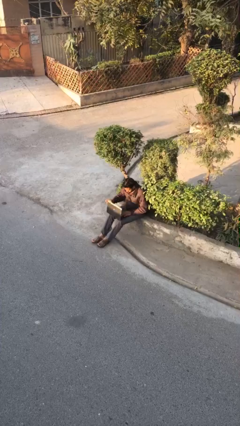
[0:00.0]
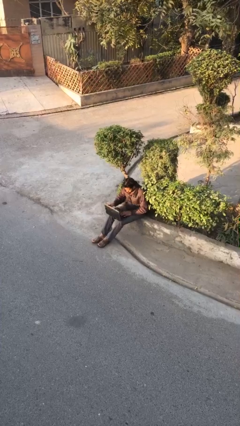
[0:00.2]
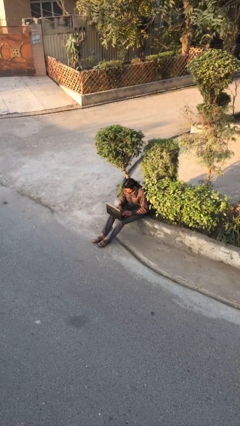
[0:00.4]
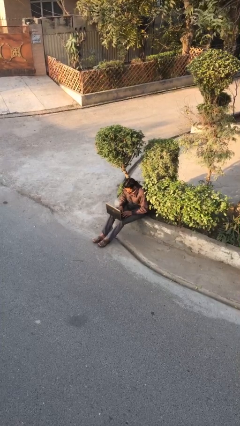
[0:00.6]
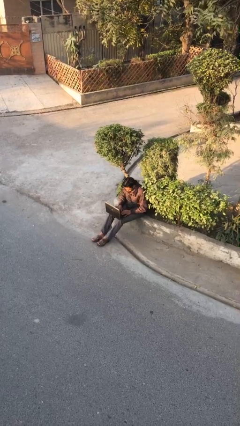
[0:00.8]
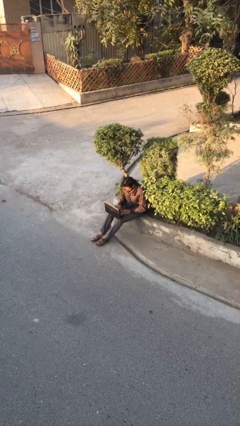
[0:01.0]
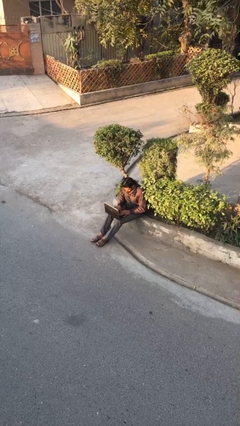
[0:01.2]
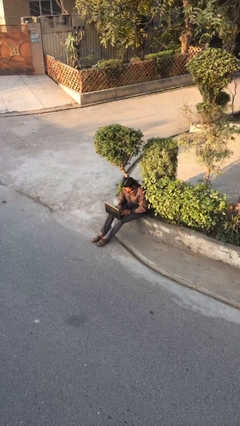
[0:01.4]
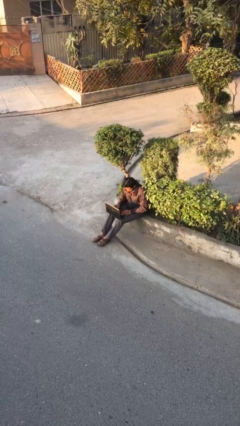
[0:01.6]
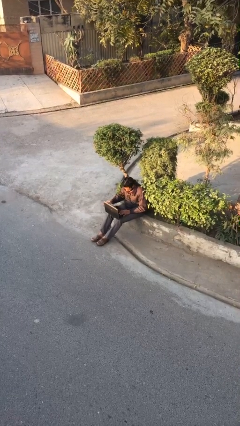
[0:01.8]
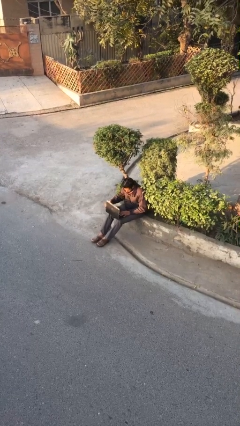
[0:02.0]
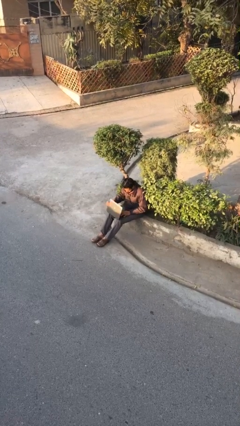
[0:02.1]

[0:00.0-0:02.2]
person interacts with laptop

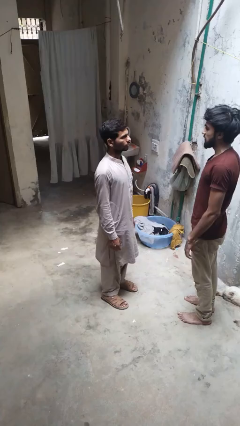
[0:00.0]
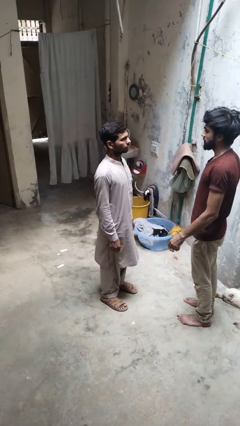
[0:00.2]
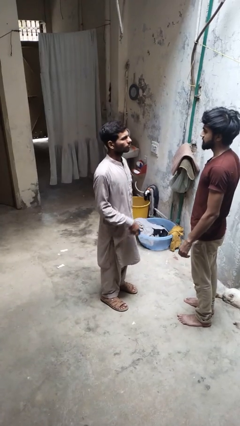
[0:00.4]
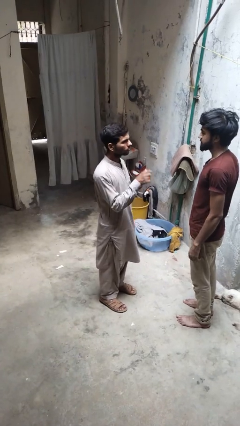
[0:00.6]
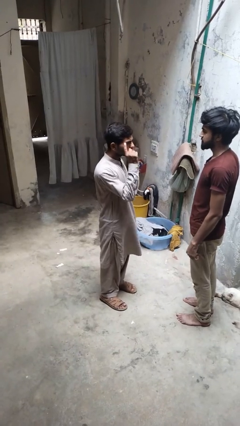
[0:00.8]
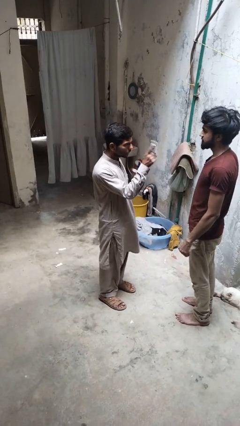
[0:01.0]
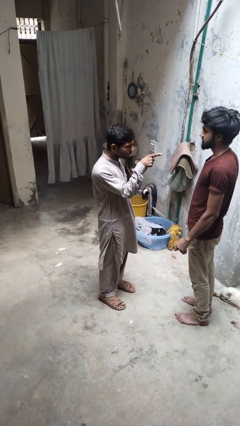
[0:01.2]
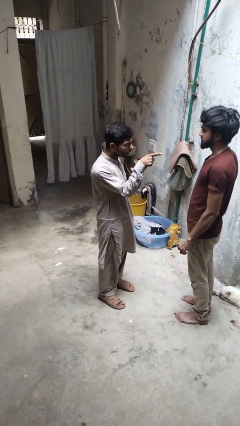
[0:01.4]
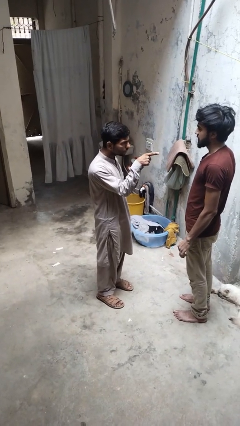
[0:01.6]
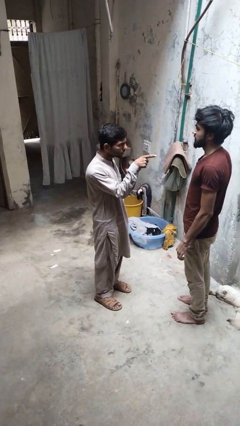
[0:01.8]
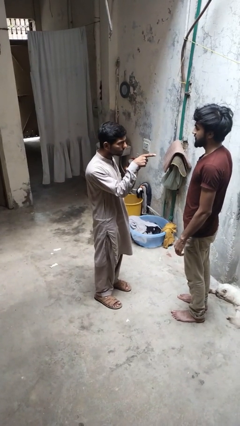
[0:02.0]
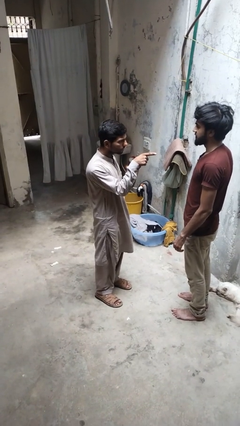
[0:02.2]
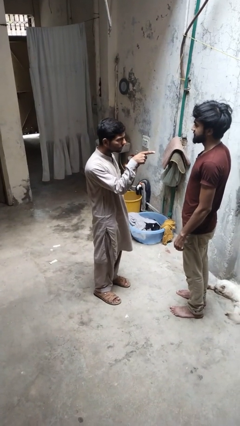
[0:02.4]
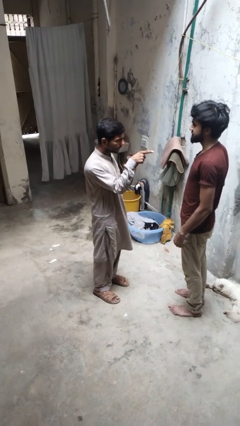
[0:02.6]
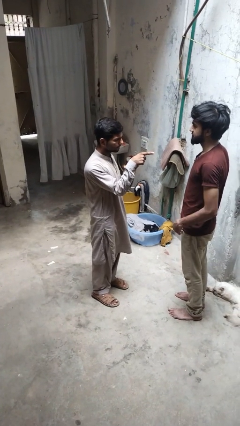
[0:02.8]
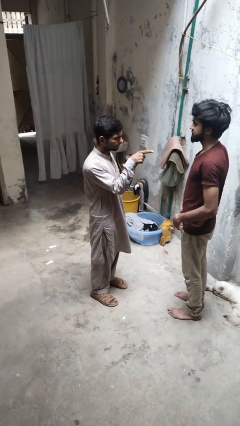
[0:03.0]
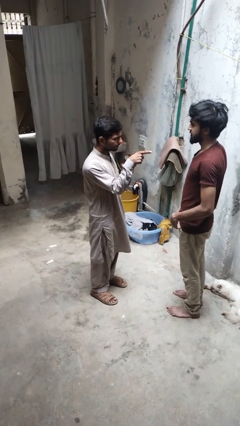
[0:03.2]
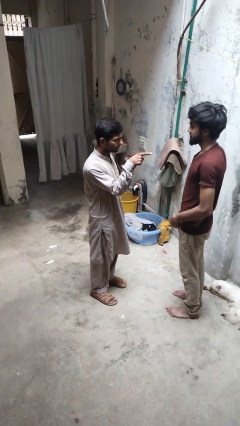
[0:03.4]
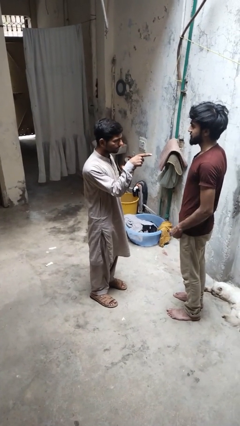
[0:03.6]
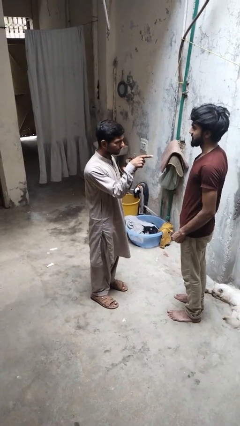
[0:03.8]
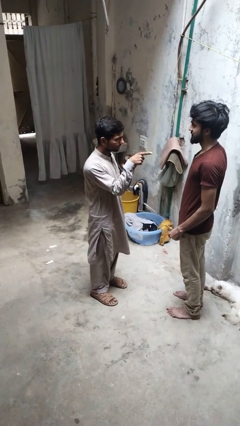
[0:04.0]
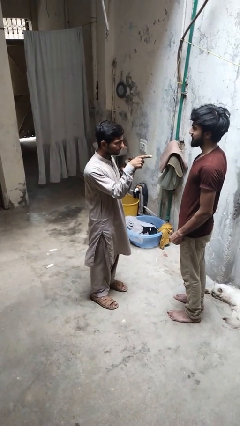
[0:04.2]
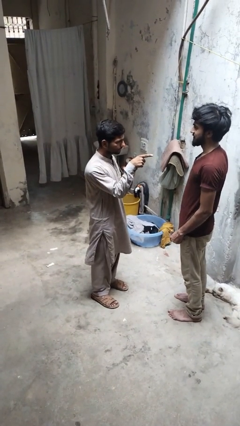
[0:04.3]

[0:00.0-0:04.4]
person points at person

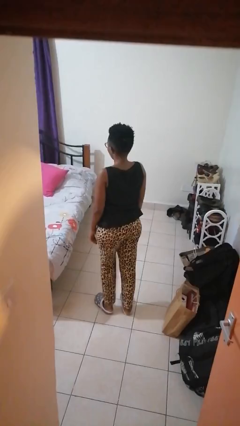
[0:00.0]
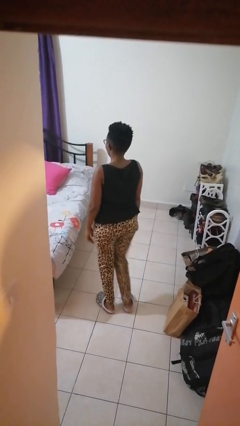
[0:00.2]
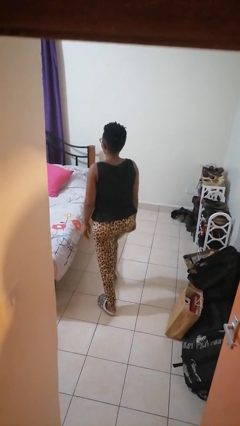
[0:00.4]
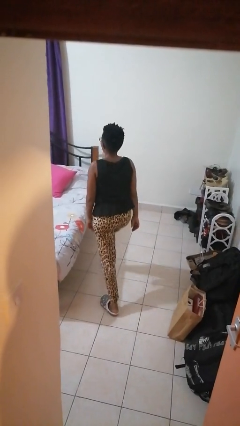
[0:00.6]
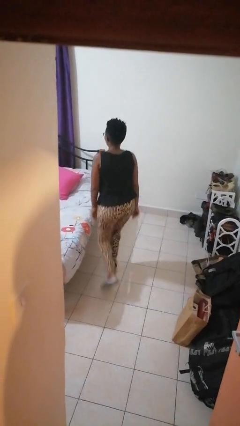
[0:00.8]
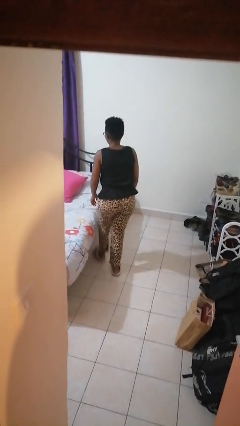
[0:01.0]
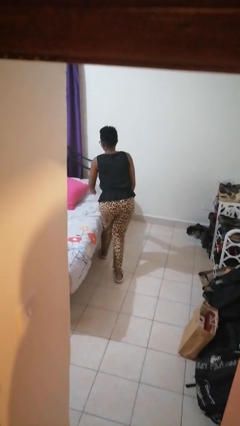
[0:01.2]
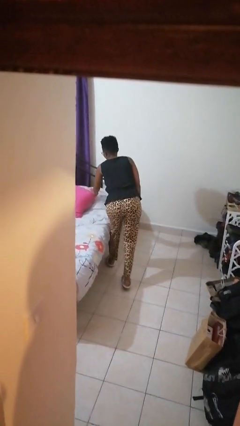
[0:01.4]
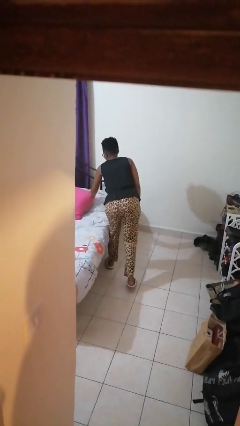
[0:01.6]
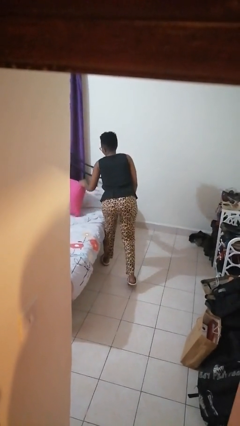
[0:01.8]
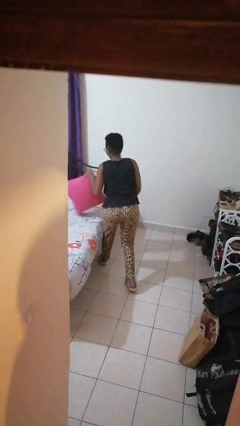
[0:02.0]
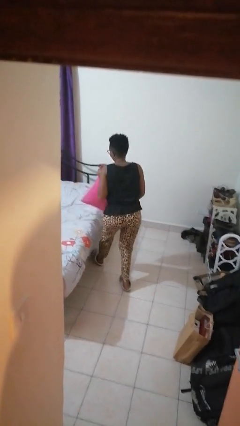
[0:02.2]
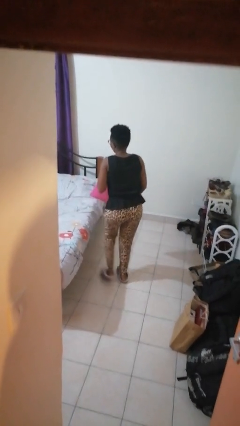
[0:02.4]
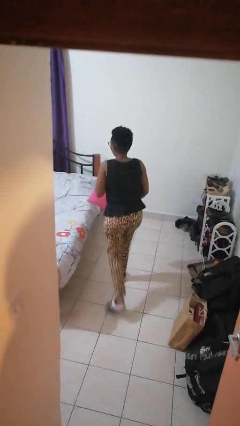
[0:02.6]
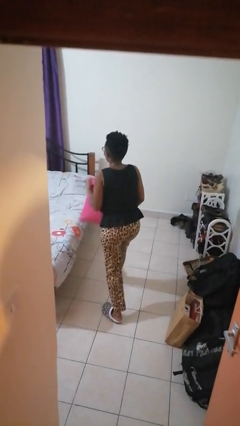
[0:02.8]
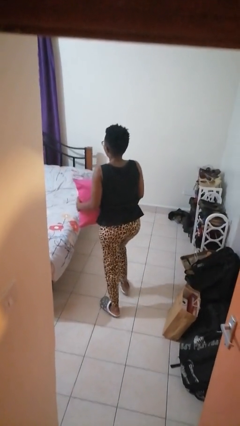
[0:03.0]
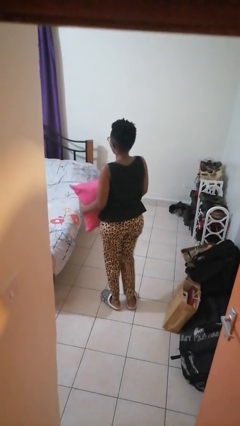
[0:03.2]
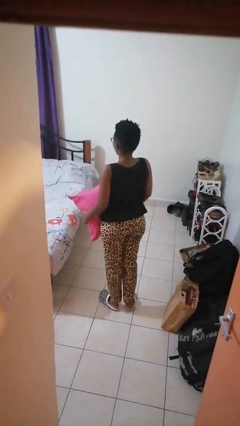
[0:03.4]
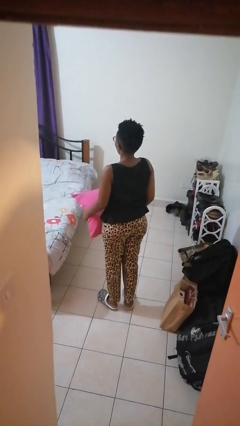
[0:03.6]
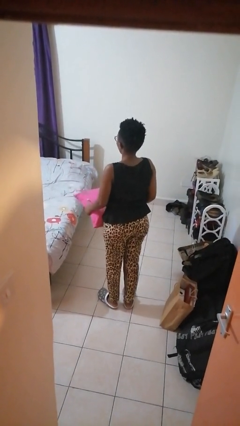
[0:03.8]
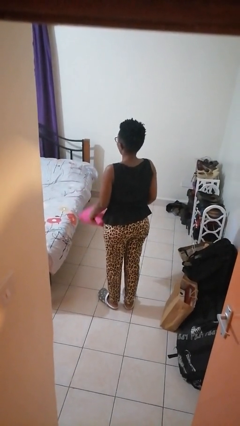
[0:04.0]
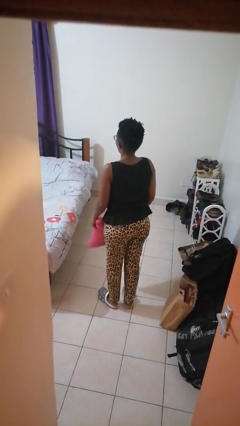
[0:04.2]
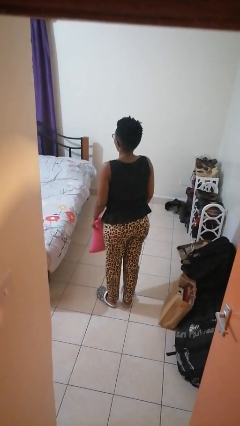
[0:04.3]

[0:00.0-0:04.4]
person picks up object from bed

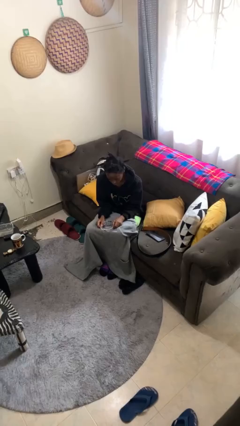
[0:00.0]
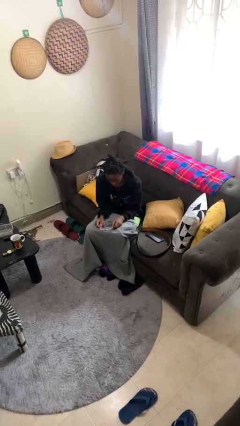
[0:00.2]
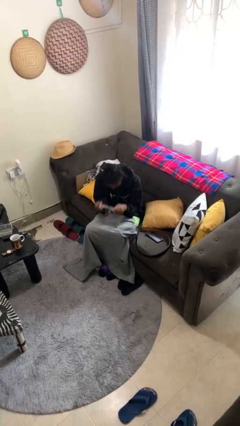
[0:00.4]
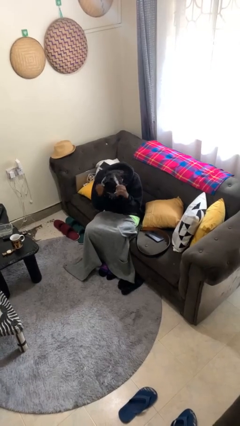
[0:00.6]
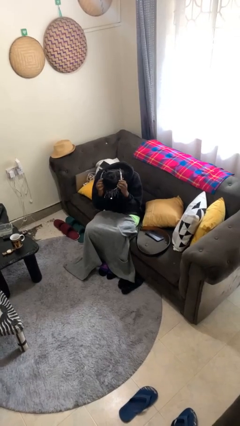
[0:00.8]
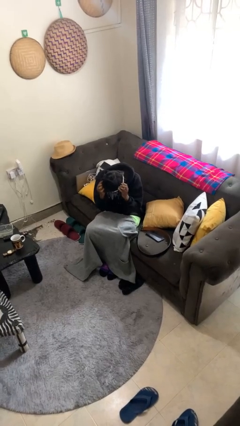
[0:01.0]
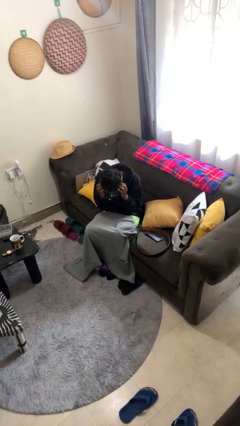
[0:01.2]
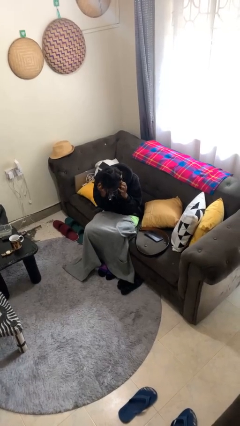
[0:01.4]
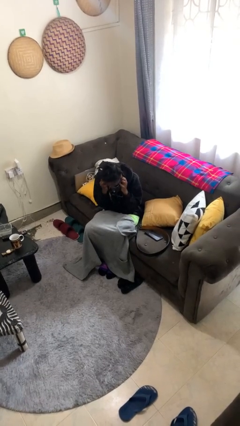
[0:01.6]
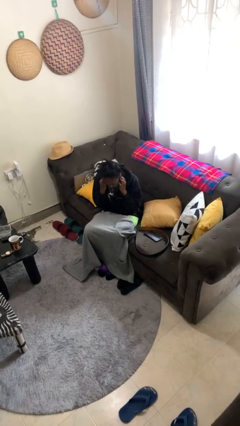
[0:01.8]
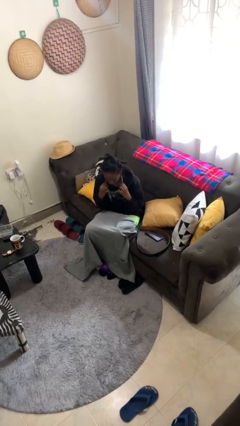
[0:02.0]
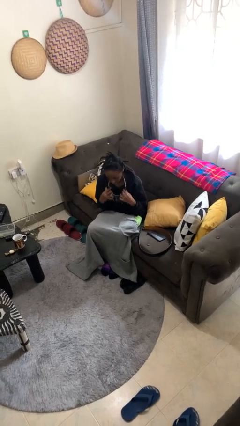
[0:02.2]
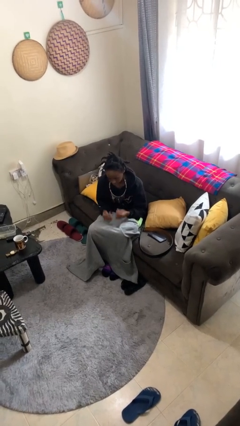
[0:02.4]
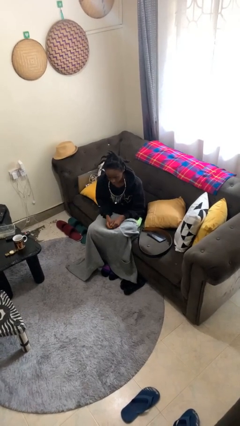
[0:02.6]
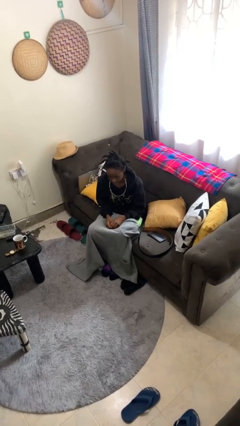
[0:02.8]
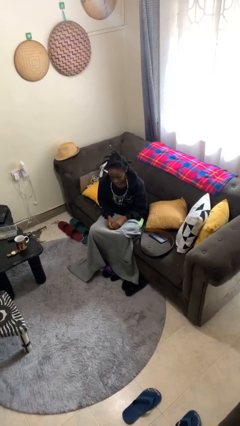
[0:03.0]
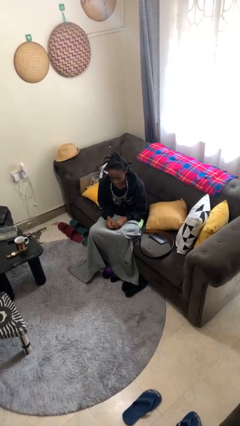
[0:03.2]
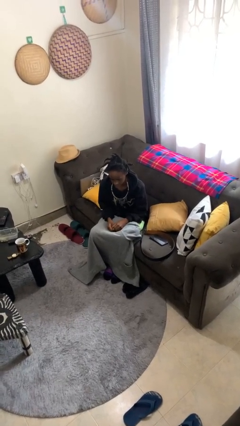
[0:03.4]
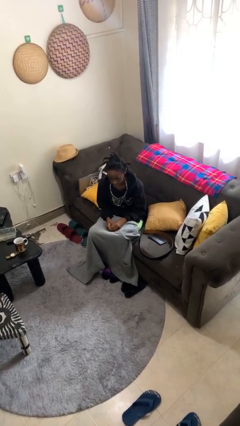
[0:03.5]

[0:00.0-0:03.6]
person puts on necklace

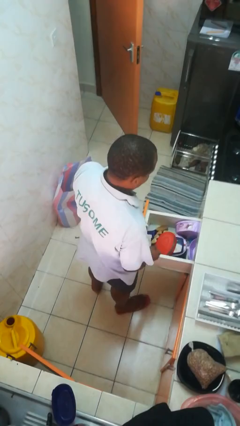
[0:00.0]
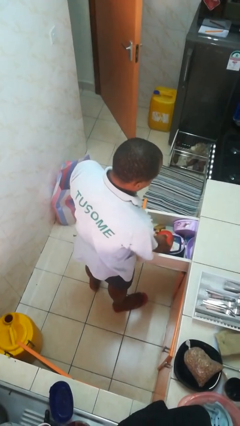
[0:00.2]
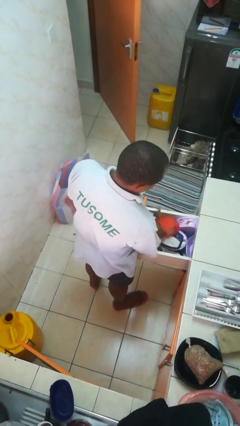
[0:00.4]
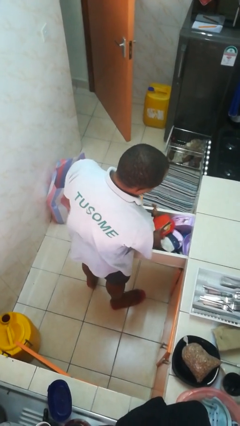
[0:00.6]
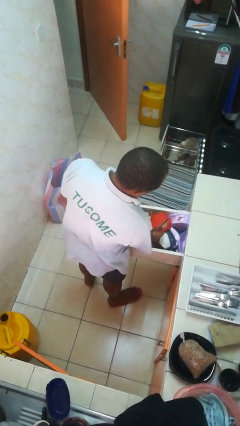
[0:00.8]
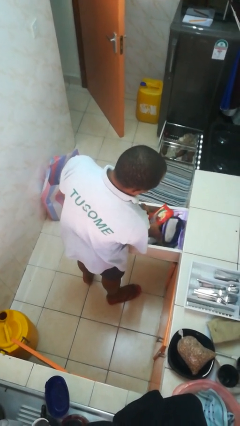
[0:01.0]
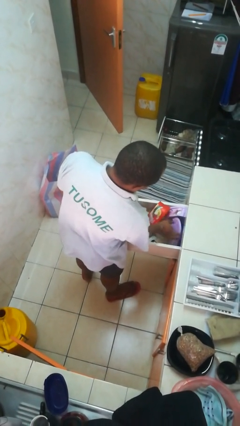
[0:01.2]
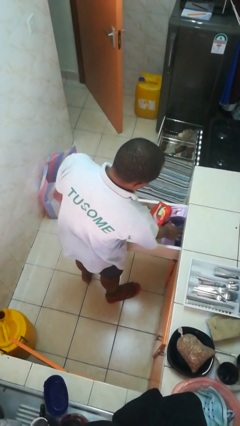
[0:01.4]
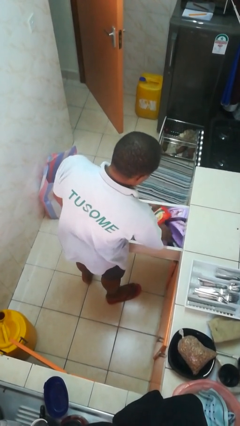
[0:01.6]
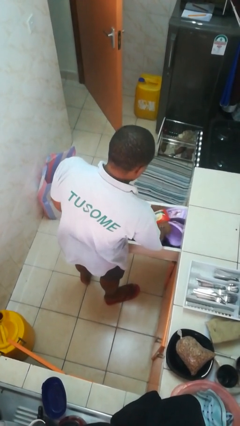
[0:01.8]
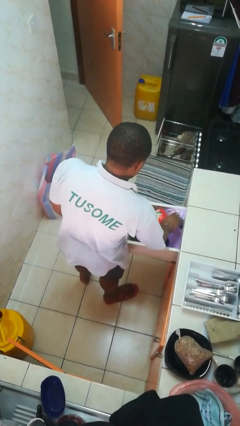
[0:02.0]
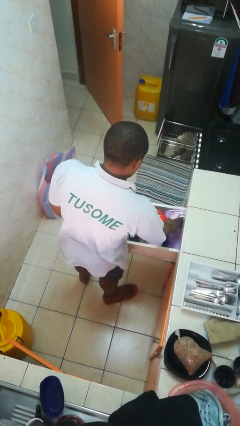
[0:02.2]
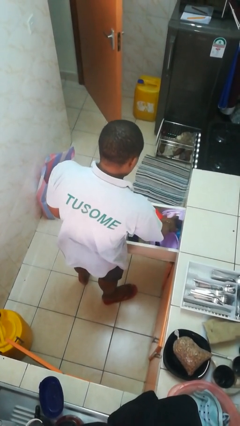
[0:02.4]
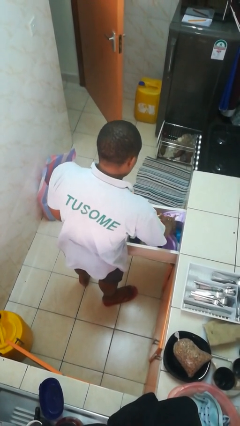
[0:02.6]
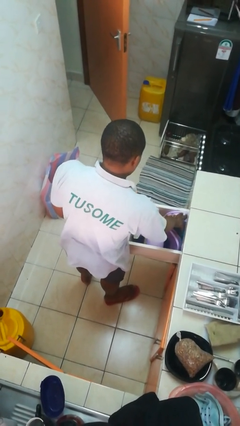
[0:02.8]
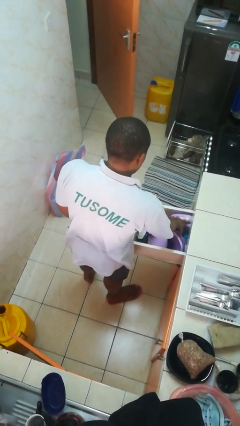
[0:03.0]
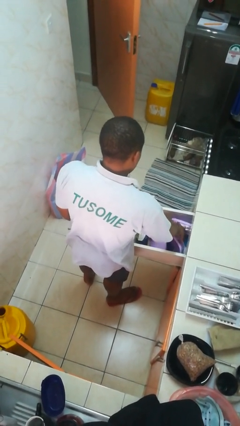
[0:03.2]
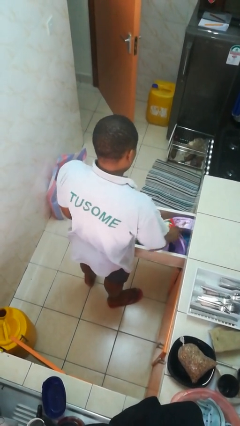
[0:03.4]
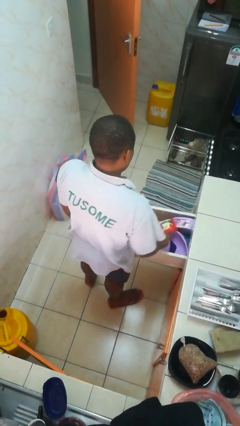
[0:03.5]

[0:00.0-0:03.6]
person searches in kitchen drawer
